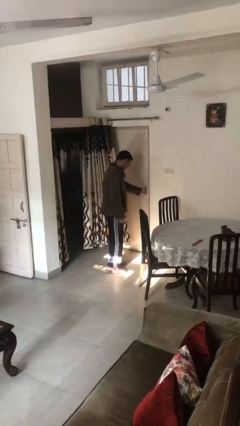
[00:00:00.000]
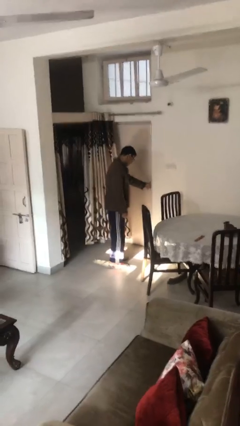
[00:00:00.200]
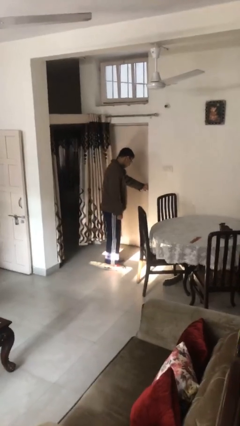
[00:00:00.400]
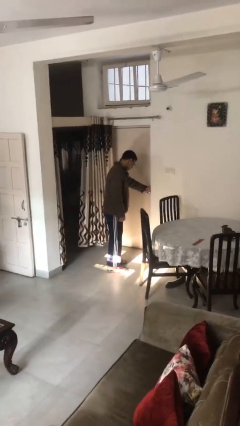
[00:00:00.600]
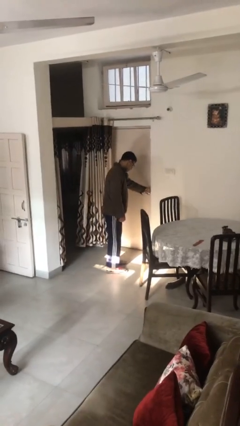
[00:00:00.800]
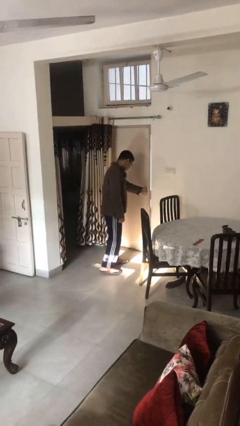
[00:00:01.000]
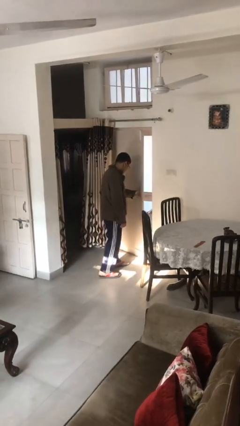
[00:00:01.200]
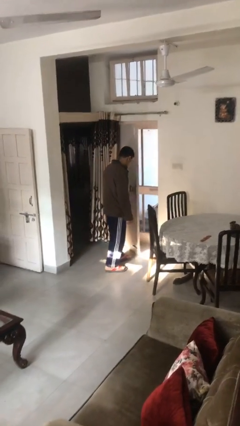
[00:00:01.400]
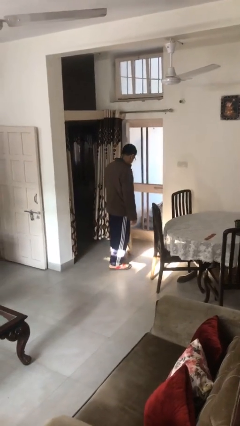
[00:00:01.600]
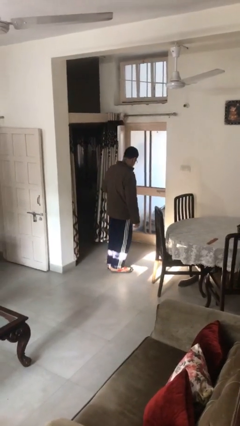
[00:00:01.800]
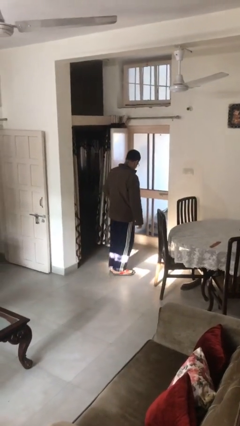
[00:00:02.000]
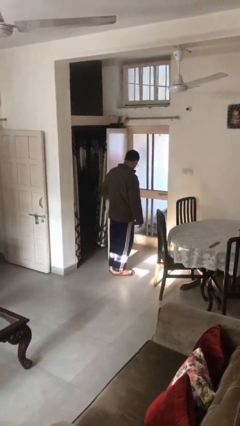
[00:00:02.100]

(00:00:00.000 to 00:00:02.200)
person opens facility door

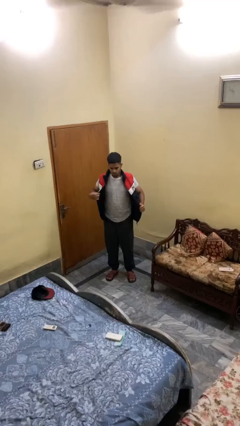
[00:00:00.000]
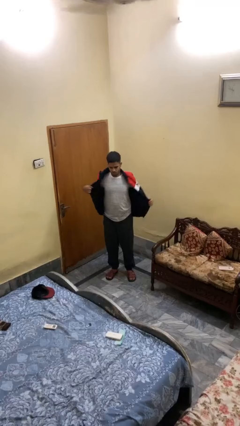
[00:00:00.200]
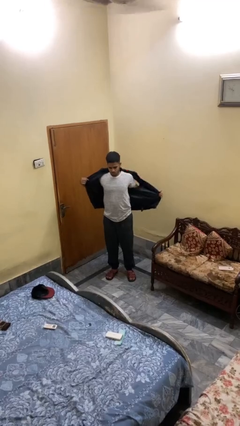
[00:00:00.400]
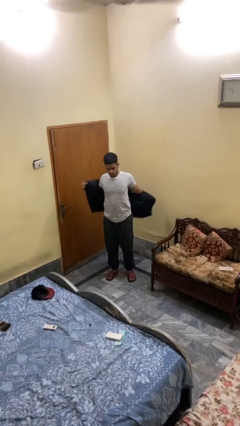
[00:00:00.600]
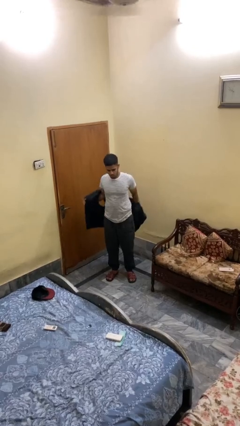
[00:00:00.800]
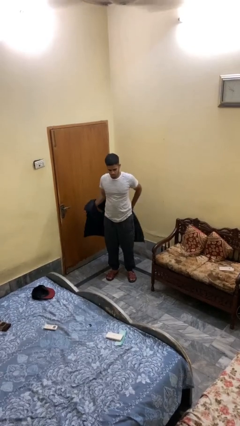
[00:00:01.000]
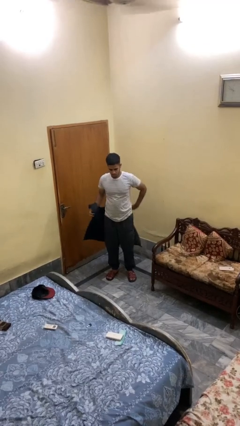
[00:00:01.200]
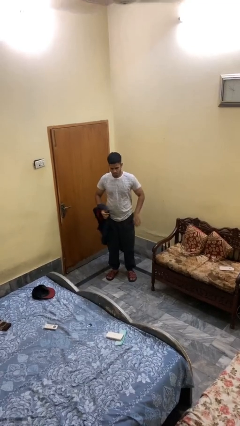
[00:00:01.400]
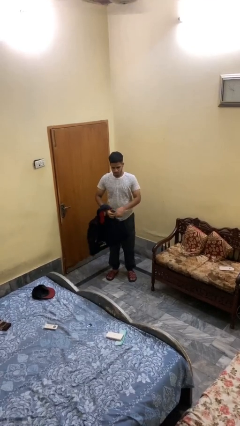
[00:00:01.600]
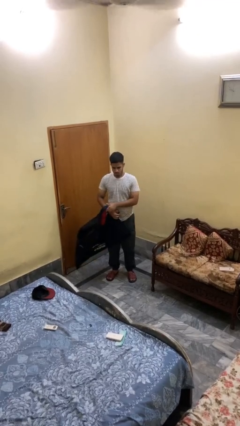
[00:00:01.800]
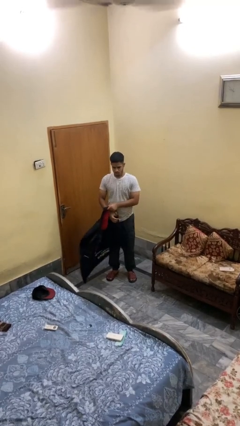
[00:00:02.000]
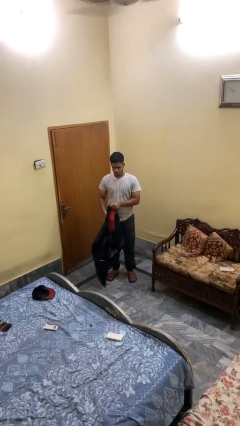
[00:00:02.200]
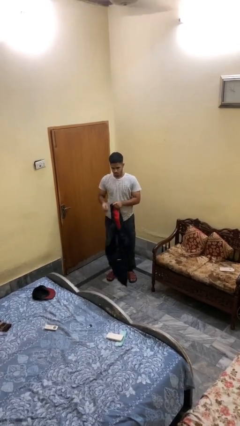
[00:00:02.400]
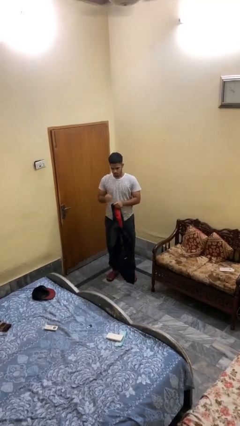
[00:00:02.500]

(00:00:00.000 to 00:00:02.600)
person takes off jacket

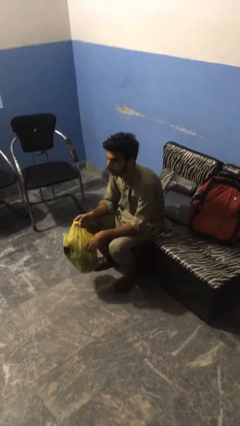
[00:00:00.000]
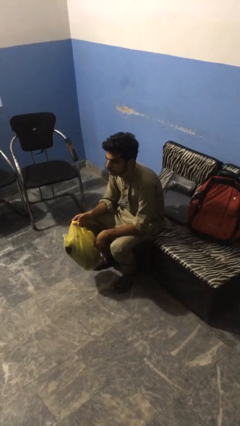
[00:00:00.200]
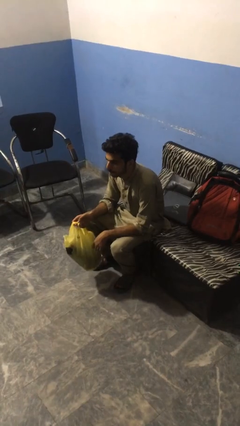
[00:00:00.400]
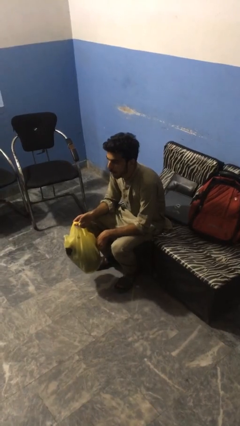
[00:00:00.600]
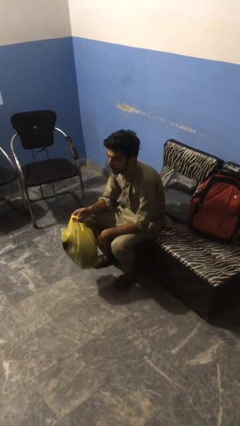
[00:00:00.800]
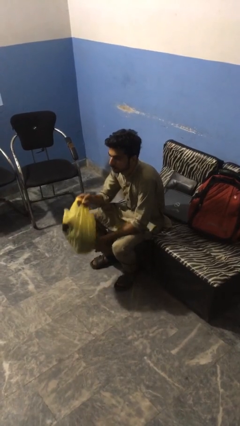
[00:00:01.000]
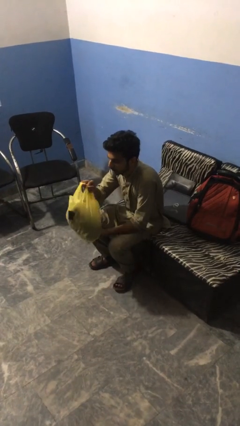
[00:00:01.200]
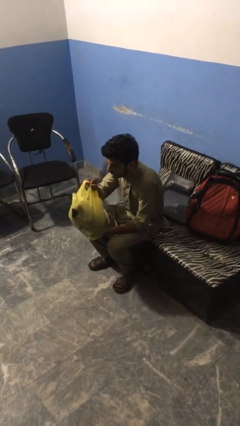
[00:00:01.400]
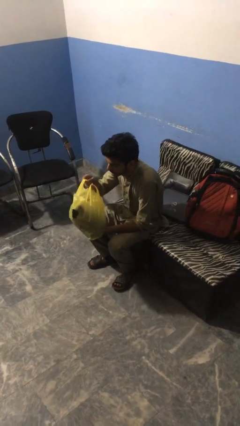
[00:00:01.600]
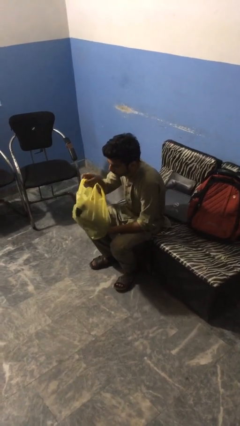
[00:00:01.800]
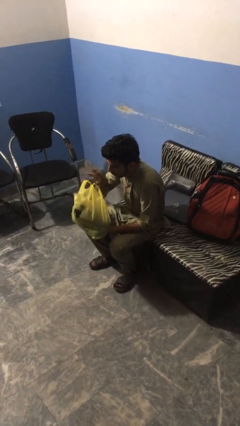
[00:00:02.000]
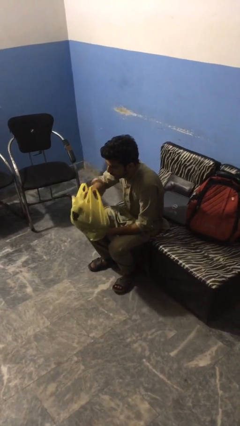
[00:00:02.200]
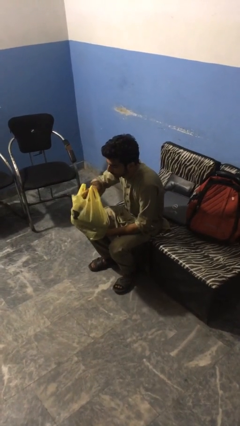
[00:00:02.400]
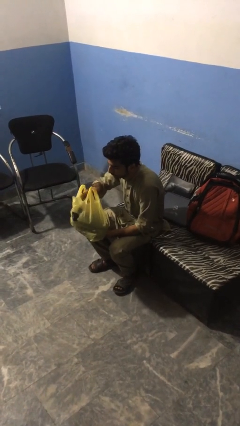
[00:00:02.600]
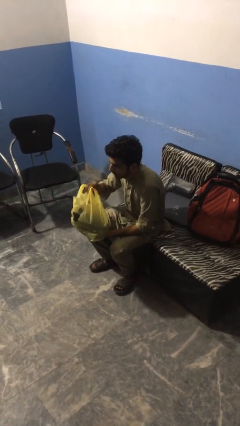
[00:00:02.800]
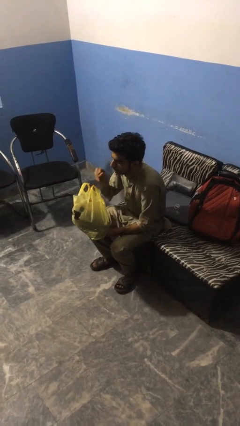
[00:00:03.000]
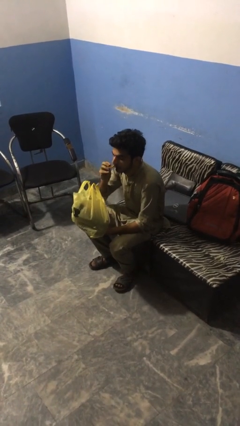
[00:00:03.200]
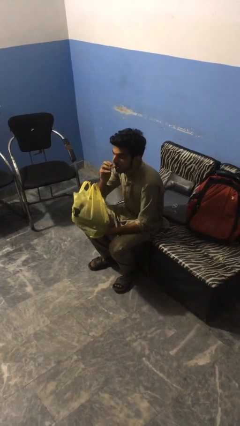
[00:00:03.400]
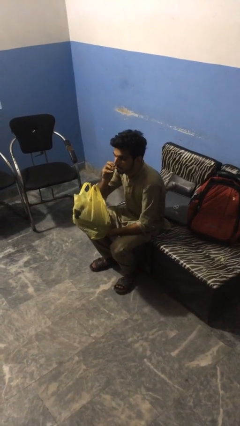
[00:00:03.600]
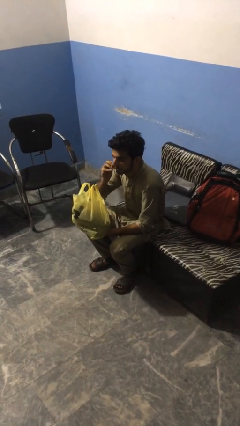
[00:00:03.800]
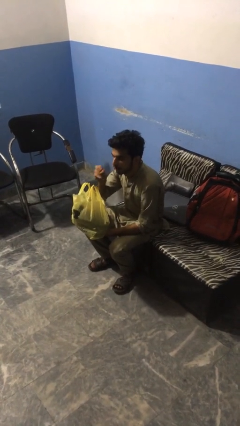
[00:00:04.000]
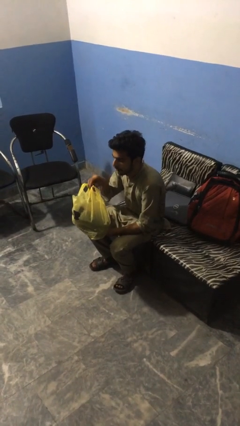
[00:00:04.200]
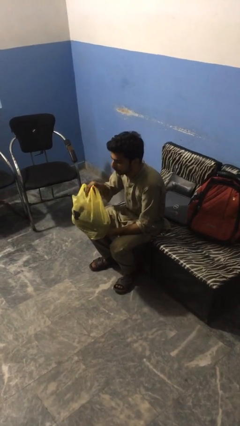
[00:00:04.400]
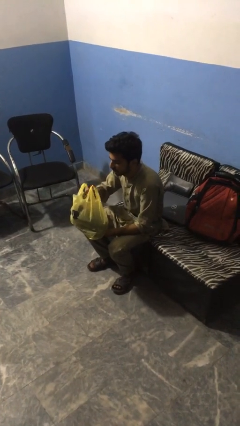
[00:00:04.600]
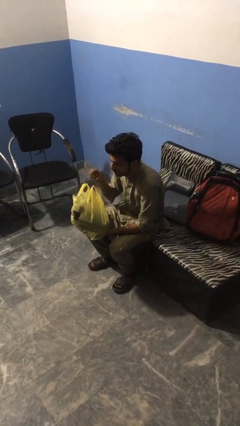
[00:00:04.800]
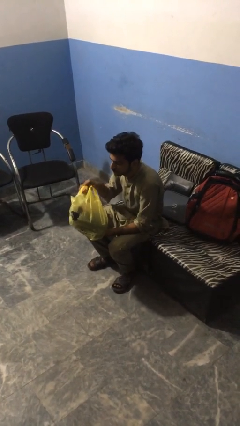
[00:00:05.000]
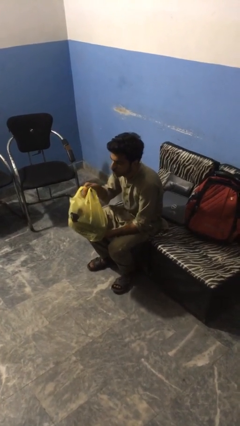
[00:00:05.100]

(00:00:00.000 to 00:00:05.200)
person eats snack from bag

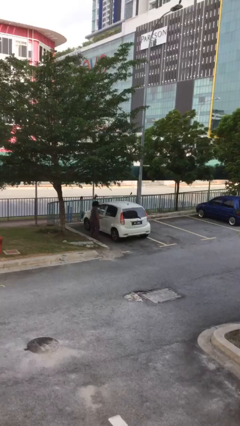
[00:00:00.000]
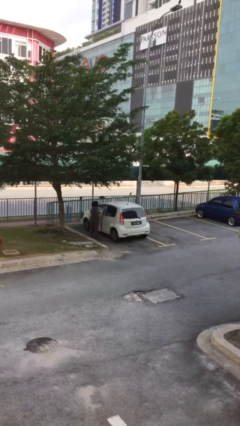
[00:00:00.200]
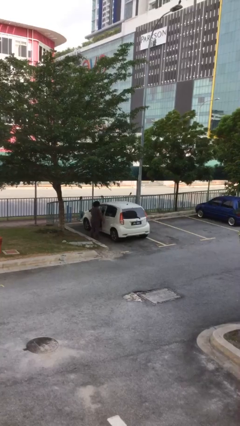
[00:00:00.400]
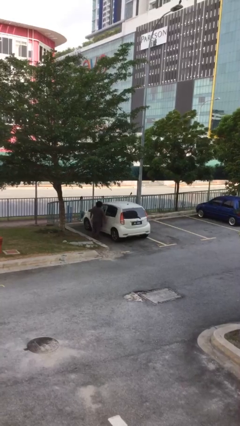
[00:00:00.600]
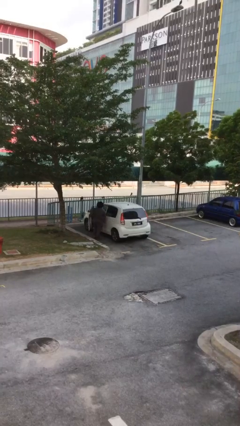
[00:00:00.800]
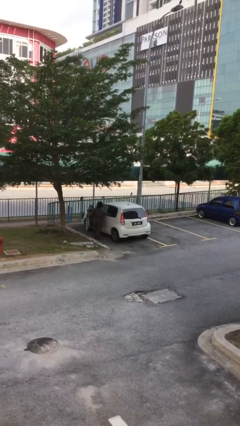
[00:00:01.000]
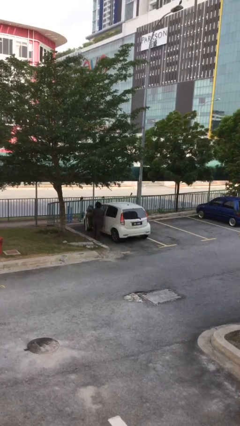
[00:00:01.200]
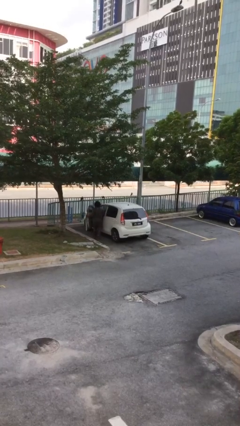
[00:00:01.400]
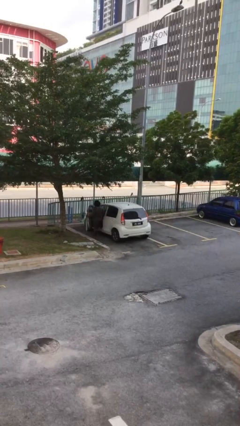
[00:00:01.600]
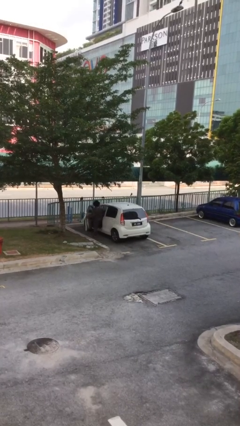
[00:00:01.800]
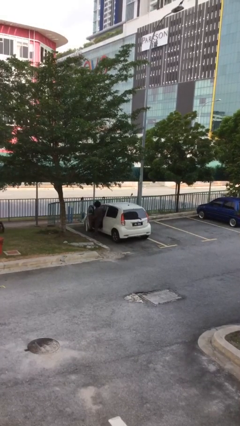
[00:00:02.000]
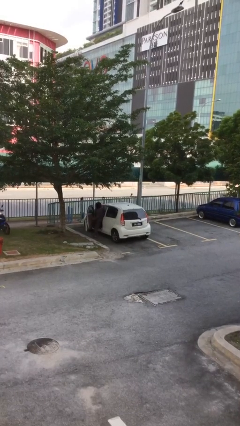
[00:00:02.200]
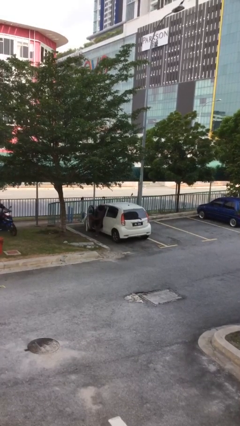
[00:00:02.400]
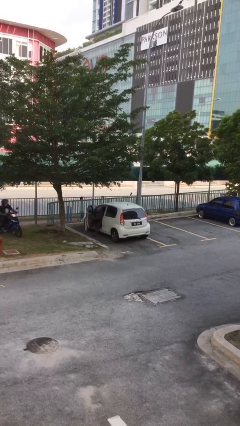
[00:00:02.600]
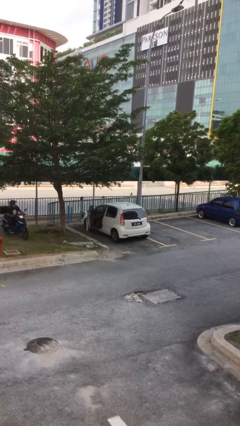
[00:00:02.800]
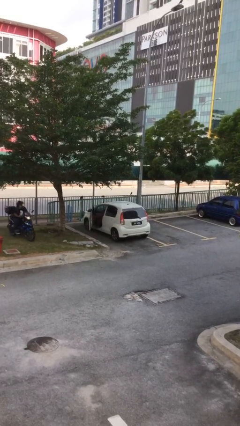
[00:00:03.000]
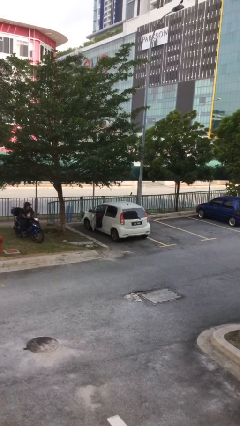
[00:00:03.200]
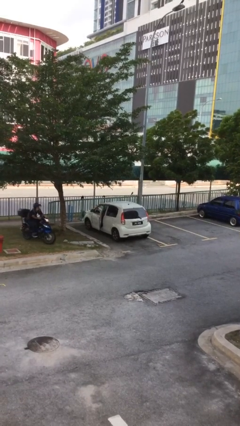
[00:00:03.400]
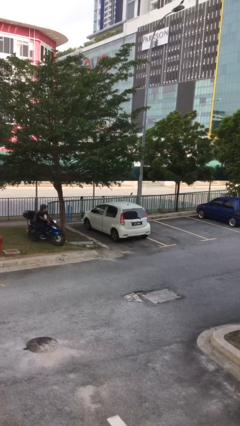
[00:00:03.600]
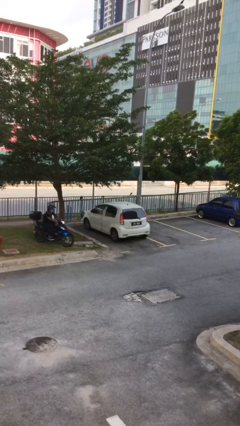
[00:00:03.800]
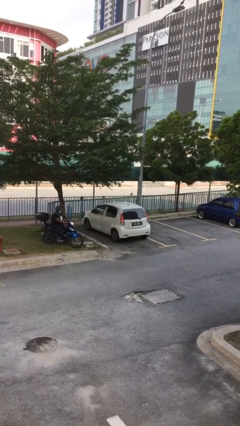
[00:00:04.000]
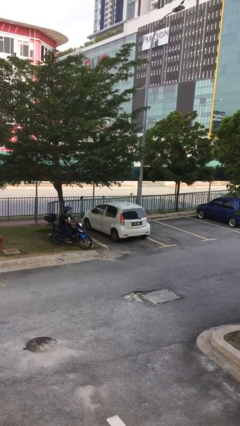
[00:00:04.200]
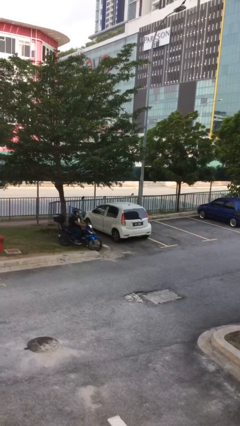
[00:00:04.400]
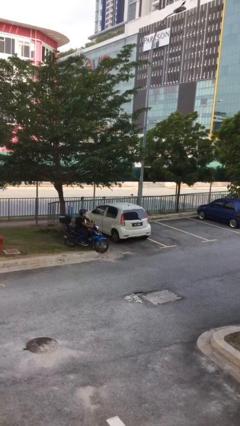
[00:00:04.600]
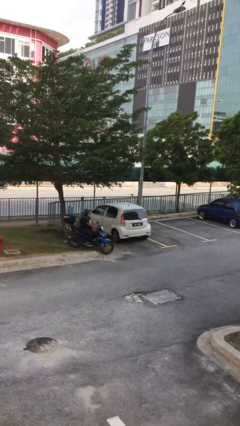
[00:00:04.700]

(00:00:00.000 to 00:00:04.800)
car picks up person

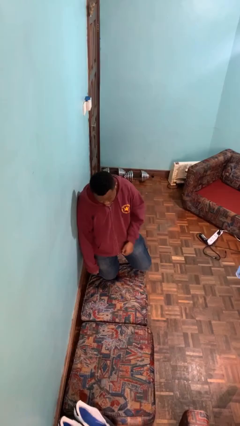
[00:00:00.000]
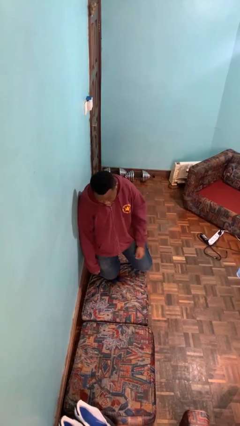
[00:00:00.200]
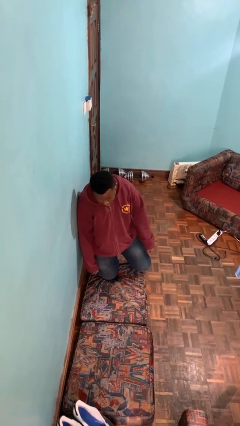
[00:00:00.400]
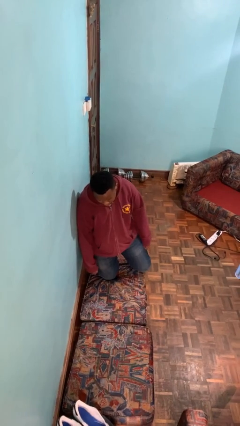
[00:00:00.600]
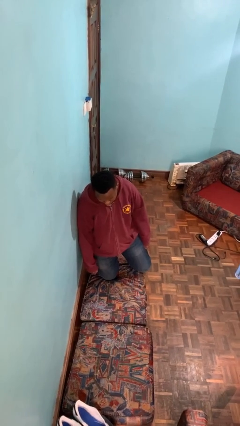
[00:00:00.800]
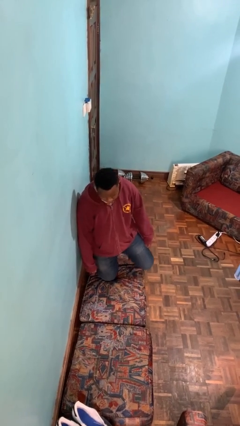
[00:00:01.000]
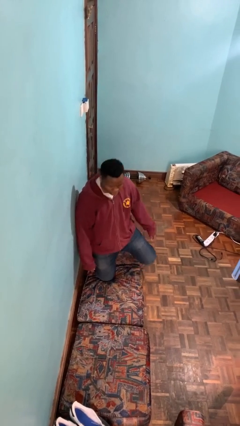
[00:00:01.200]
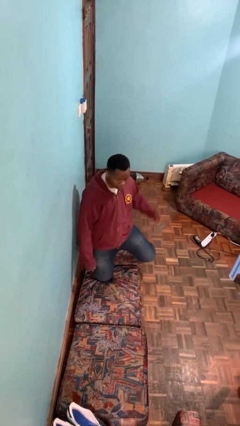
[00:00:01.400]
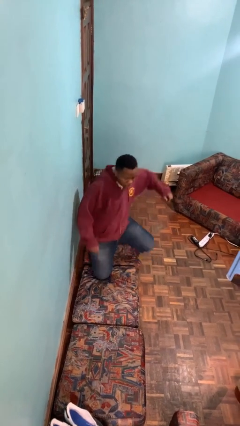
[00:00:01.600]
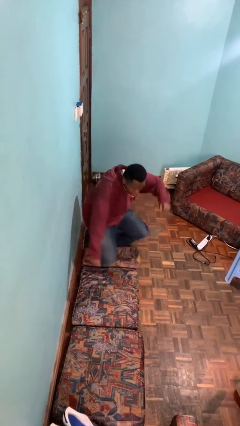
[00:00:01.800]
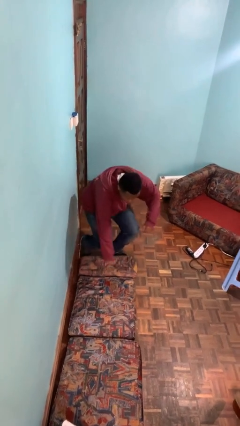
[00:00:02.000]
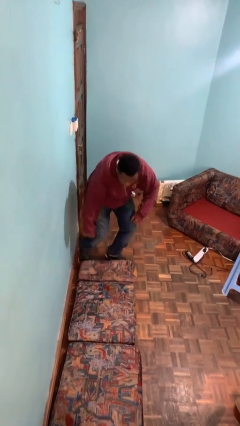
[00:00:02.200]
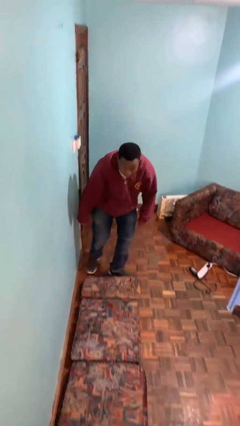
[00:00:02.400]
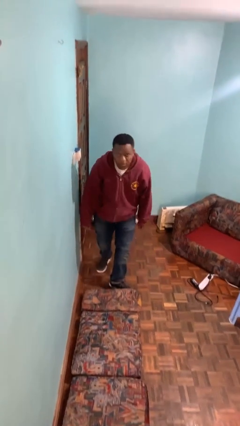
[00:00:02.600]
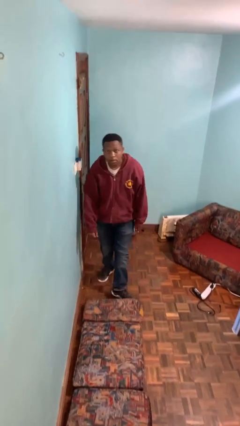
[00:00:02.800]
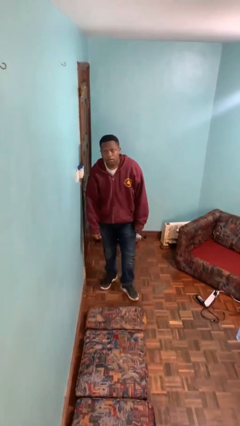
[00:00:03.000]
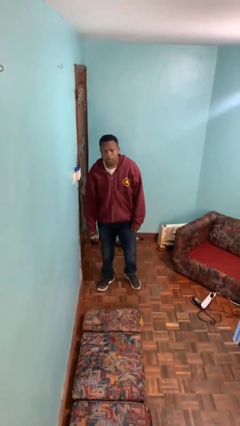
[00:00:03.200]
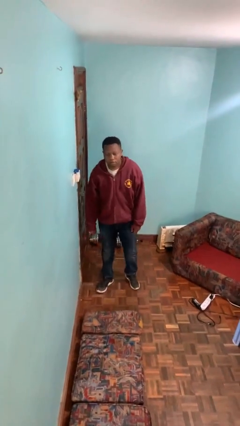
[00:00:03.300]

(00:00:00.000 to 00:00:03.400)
person stands up from floor
